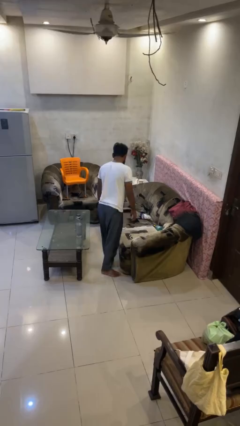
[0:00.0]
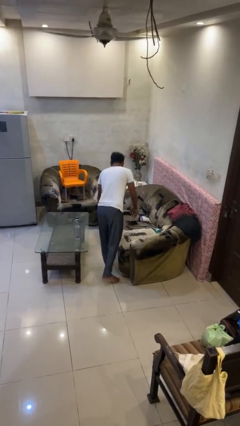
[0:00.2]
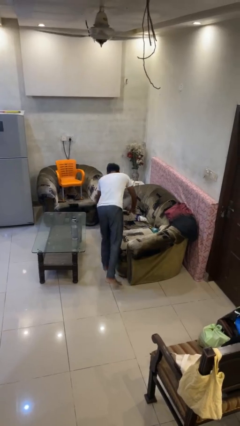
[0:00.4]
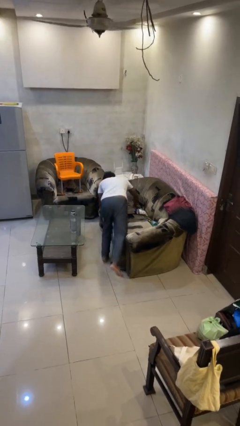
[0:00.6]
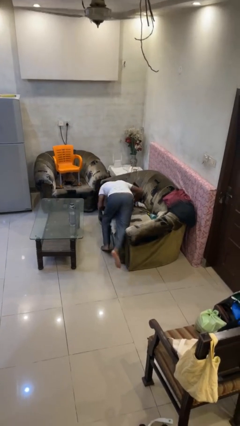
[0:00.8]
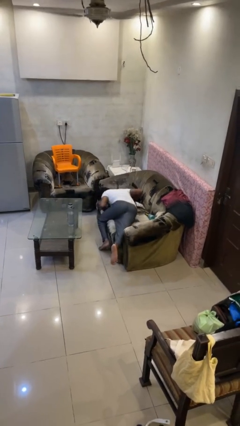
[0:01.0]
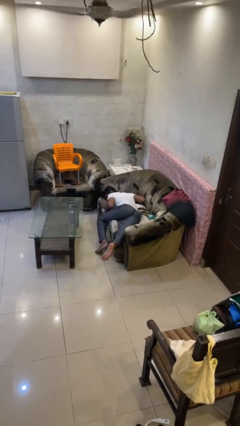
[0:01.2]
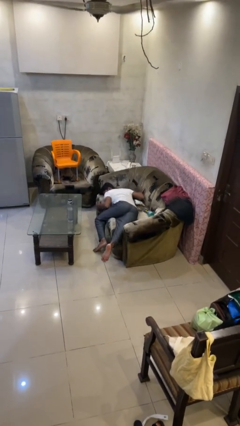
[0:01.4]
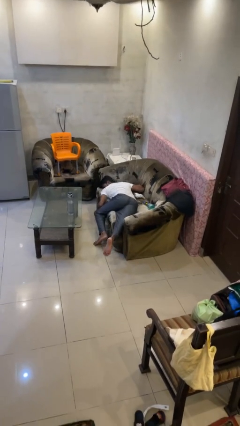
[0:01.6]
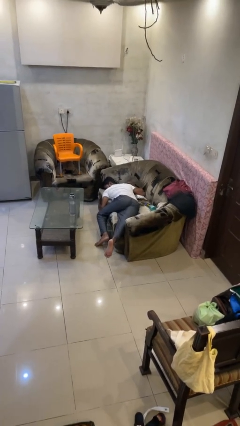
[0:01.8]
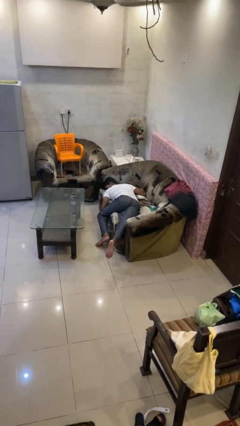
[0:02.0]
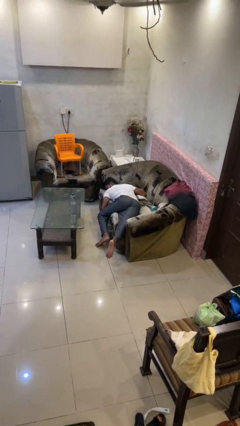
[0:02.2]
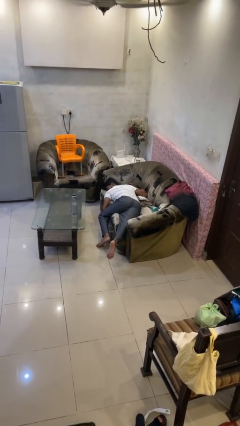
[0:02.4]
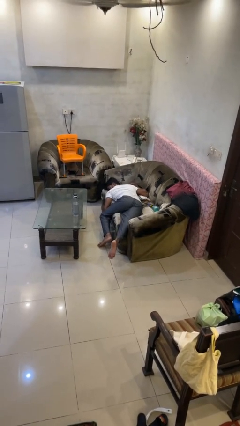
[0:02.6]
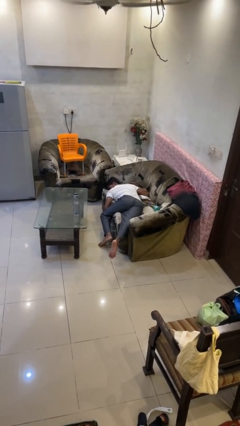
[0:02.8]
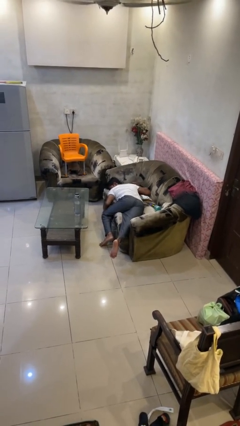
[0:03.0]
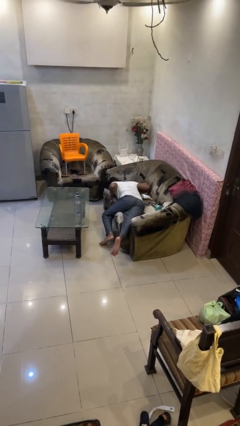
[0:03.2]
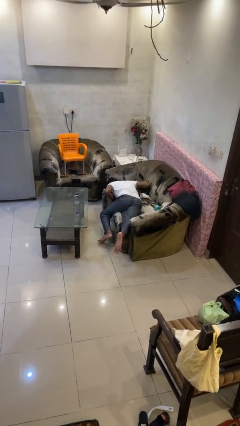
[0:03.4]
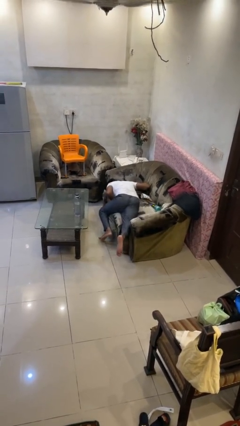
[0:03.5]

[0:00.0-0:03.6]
person lies down on couch

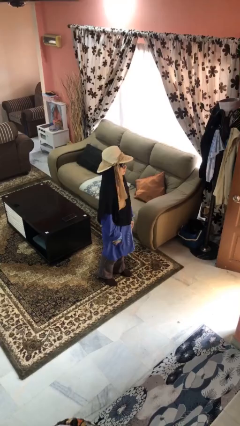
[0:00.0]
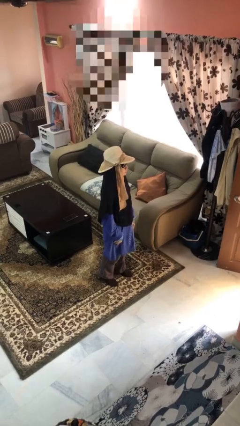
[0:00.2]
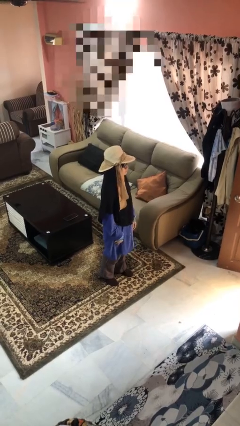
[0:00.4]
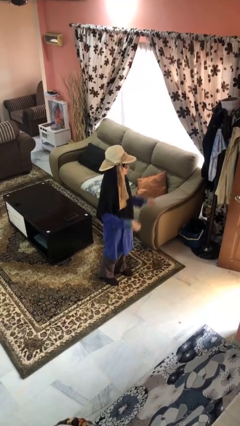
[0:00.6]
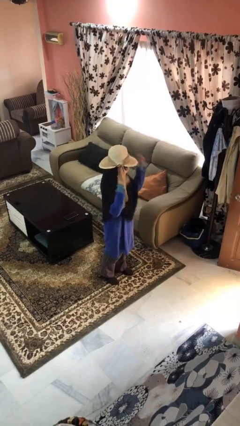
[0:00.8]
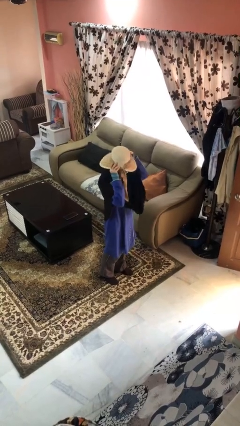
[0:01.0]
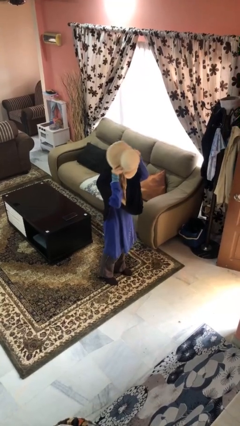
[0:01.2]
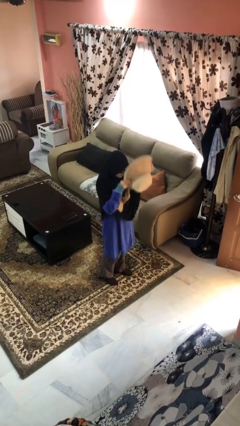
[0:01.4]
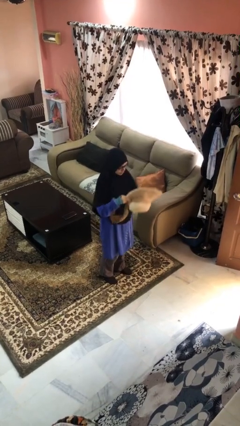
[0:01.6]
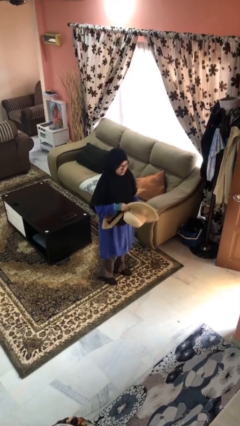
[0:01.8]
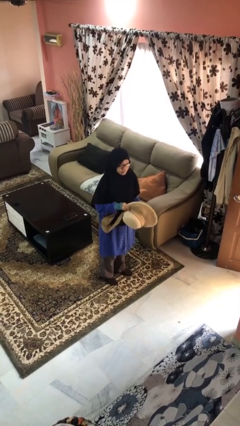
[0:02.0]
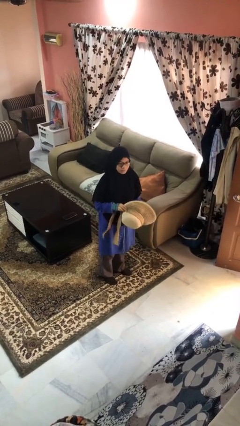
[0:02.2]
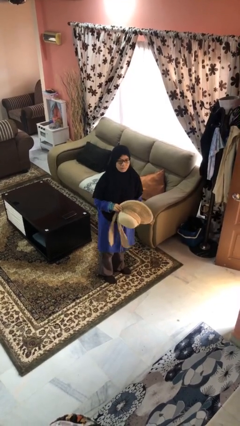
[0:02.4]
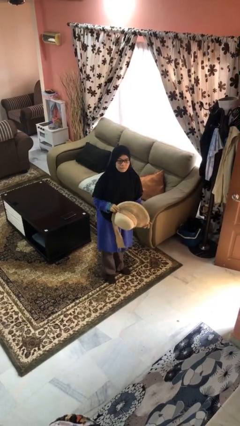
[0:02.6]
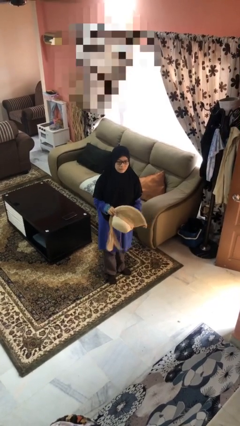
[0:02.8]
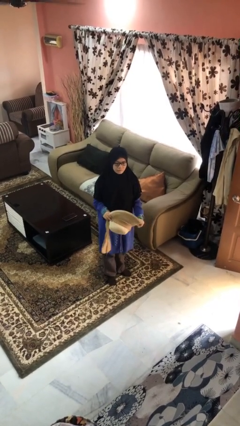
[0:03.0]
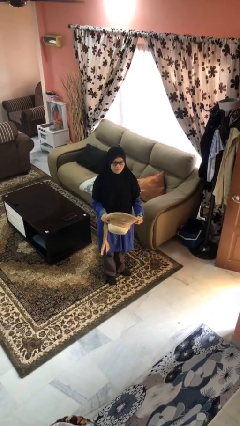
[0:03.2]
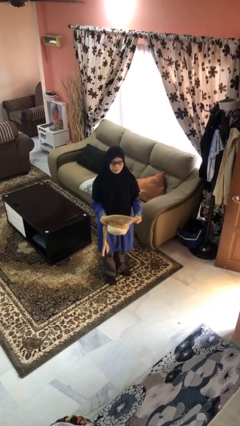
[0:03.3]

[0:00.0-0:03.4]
person takes off hat

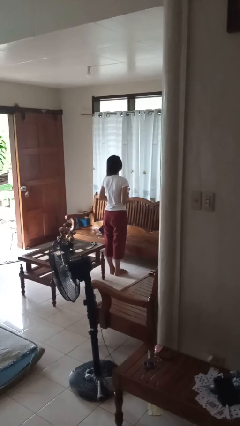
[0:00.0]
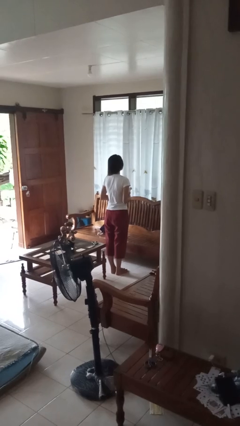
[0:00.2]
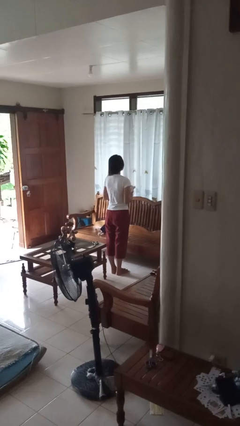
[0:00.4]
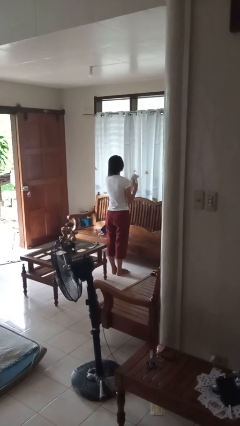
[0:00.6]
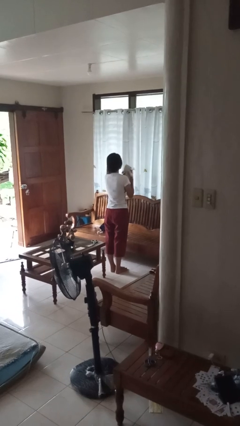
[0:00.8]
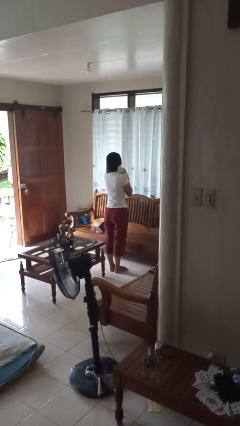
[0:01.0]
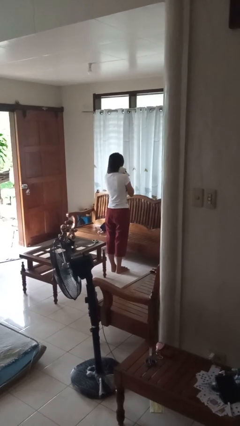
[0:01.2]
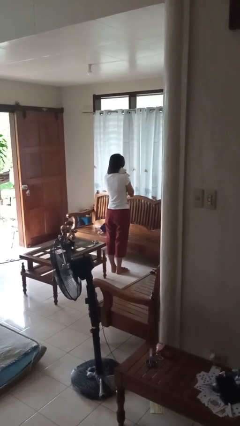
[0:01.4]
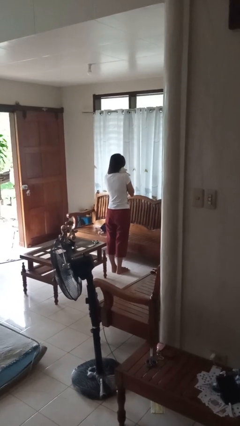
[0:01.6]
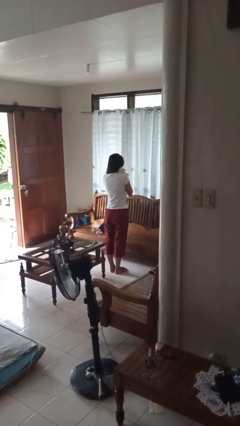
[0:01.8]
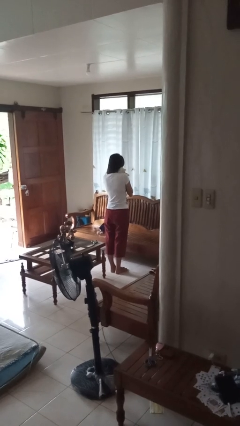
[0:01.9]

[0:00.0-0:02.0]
person hugs stuffed animal

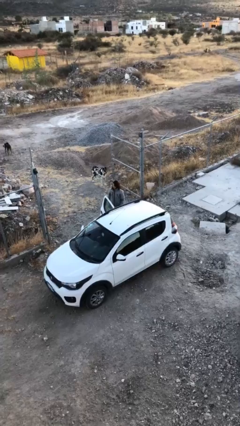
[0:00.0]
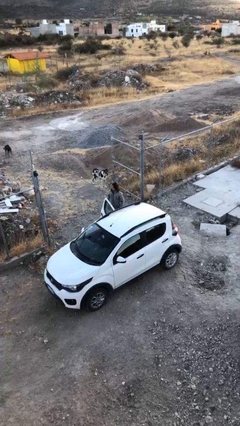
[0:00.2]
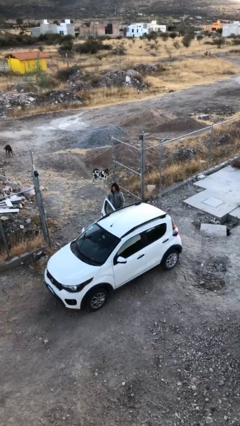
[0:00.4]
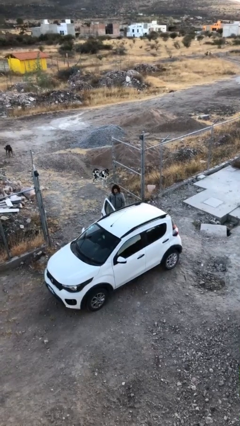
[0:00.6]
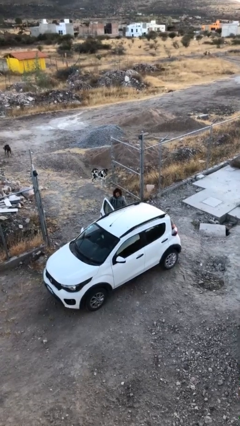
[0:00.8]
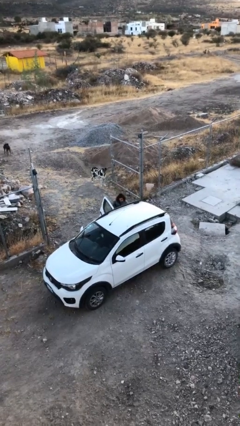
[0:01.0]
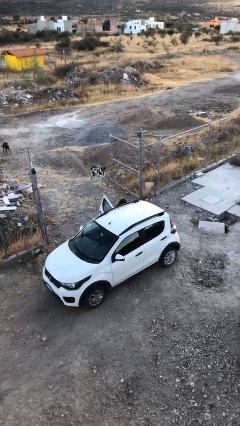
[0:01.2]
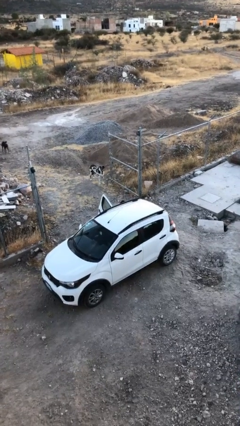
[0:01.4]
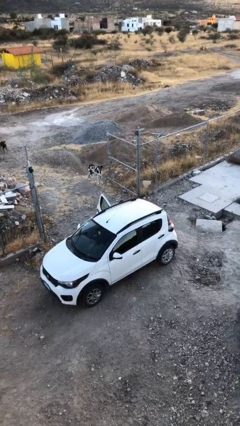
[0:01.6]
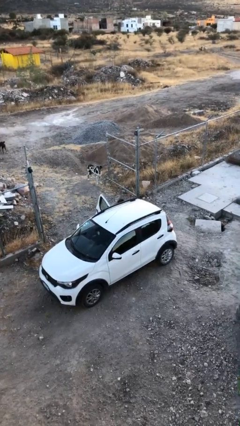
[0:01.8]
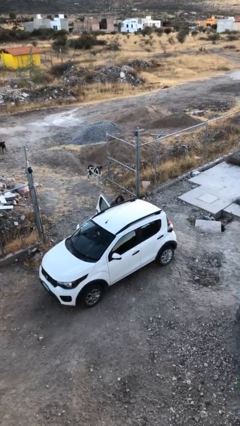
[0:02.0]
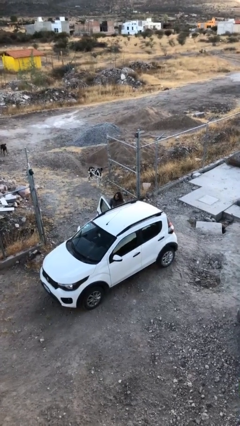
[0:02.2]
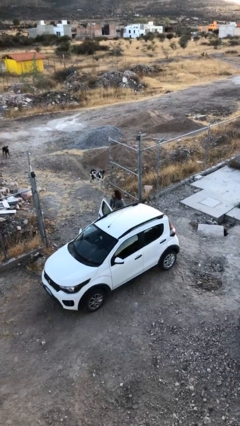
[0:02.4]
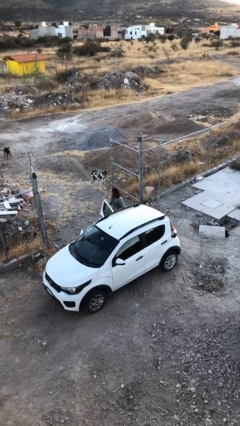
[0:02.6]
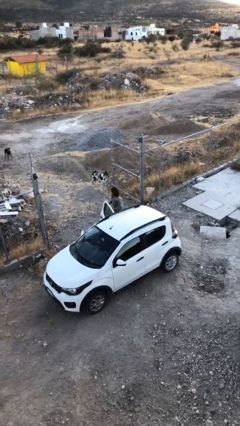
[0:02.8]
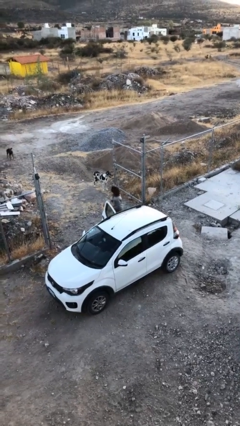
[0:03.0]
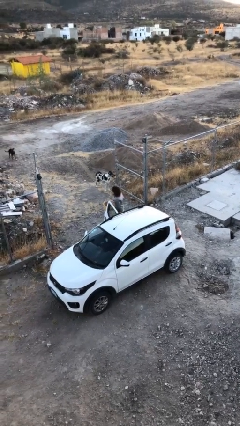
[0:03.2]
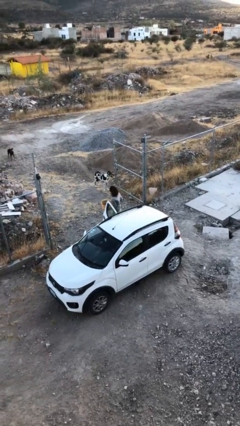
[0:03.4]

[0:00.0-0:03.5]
person unloads car

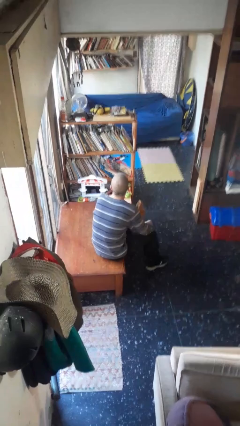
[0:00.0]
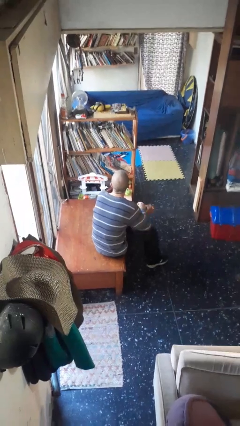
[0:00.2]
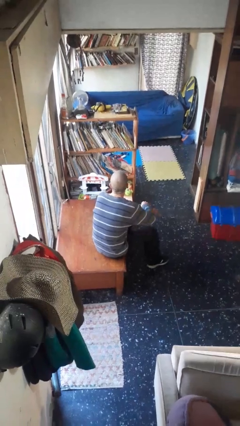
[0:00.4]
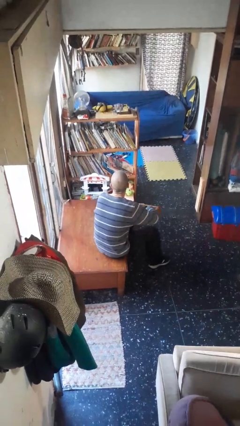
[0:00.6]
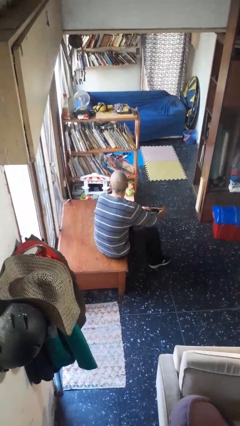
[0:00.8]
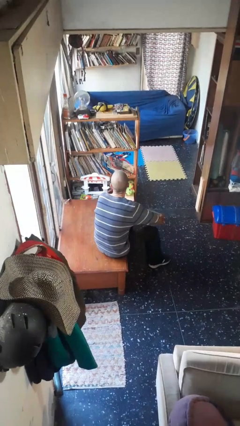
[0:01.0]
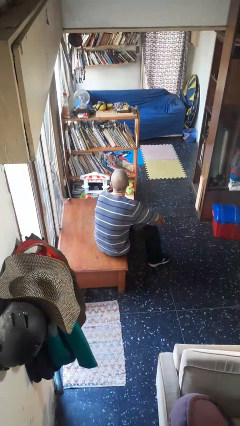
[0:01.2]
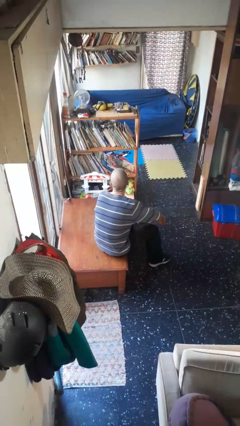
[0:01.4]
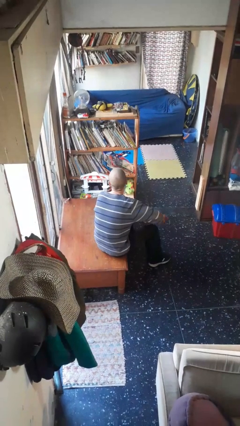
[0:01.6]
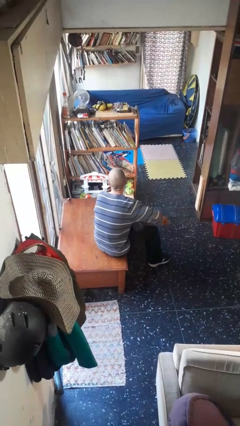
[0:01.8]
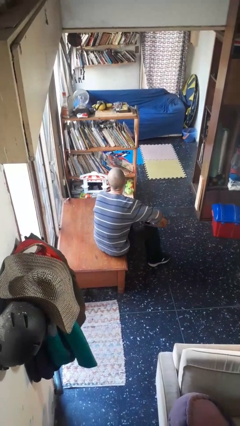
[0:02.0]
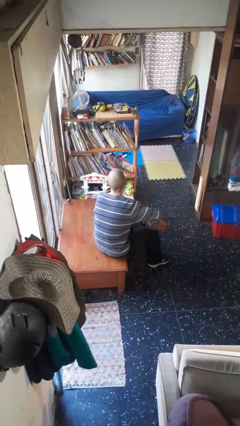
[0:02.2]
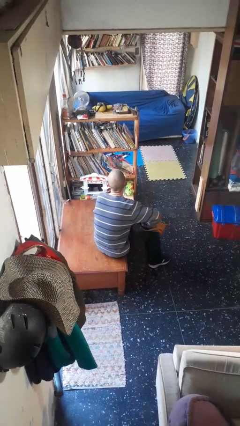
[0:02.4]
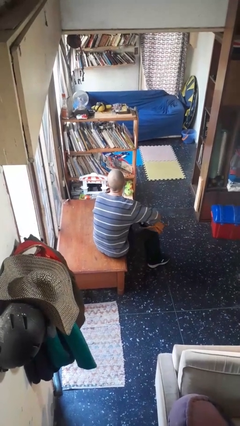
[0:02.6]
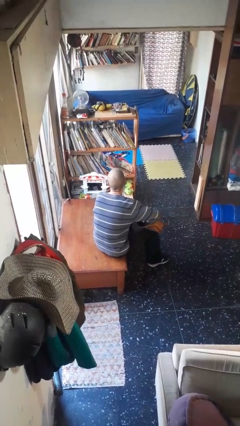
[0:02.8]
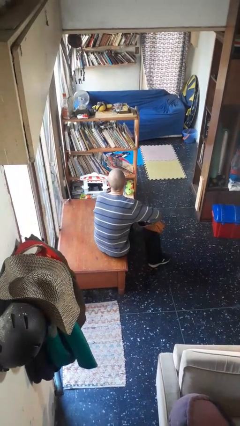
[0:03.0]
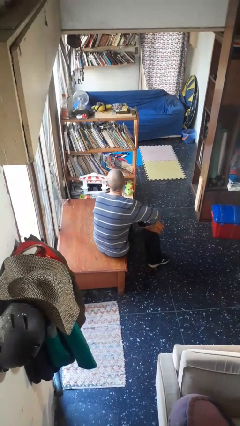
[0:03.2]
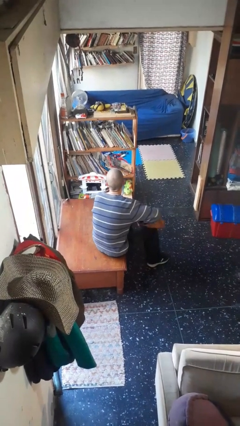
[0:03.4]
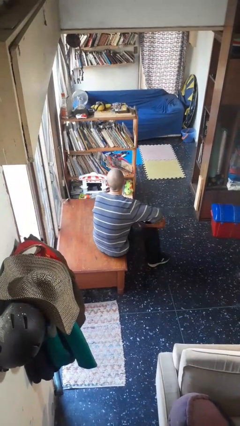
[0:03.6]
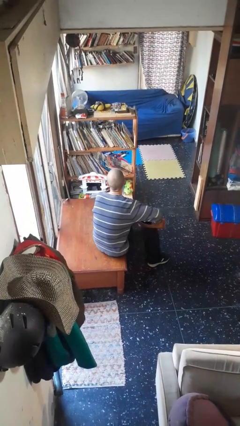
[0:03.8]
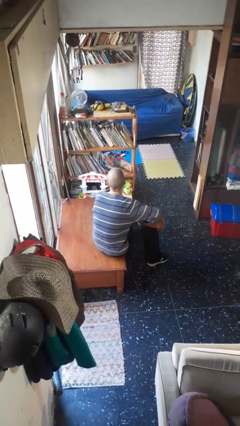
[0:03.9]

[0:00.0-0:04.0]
person searches in purse

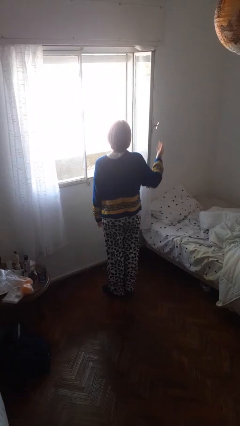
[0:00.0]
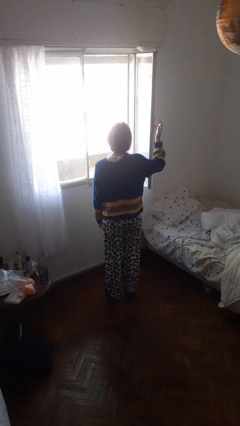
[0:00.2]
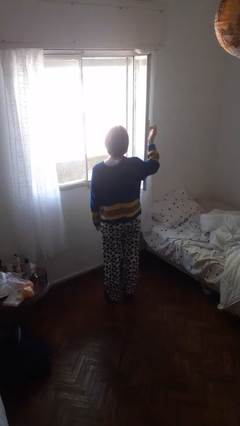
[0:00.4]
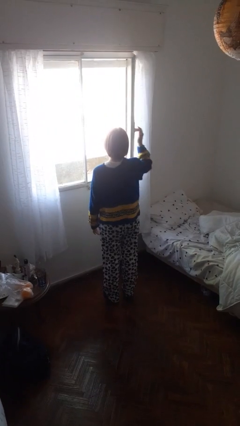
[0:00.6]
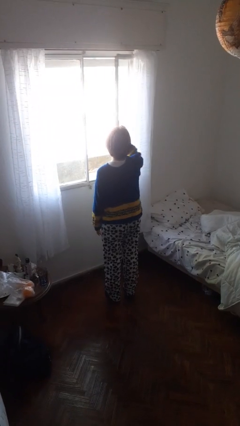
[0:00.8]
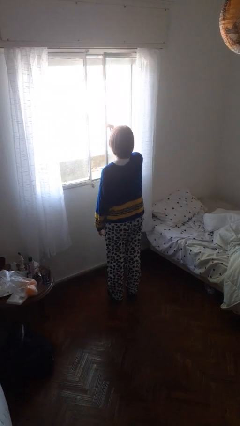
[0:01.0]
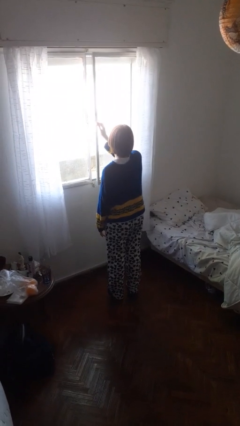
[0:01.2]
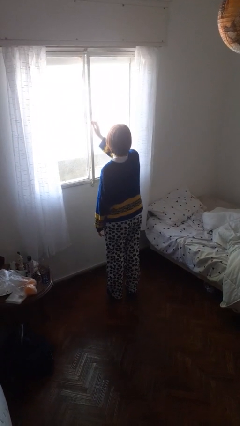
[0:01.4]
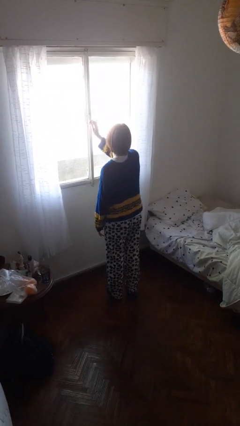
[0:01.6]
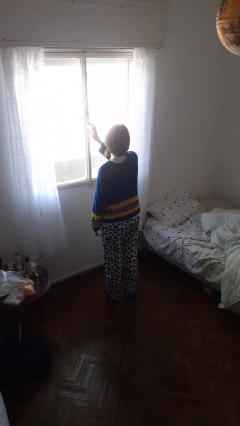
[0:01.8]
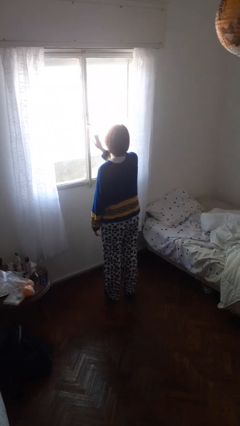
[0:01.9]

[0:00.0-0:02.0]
person closes home window
